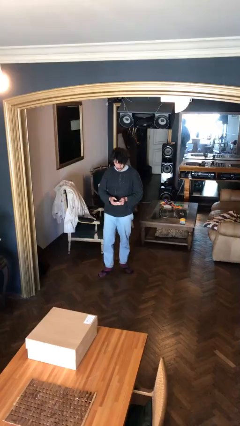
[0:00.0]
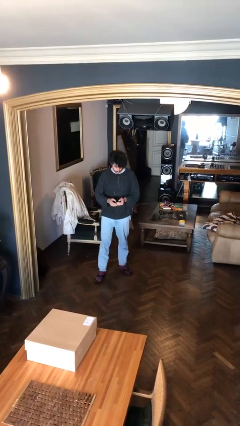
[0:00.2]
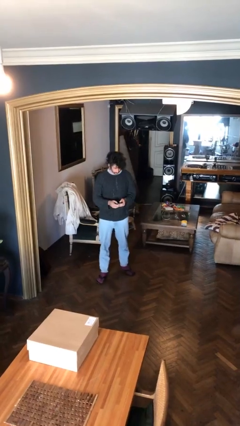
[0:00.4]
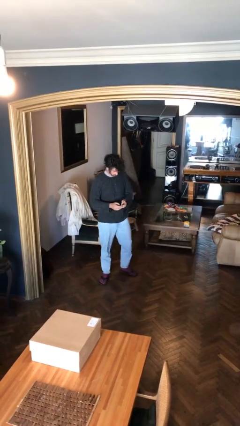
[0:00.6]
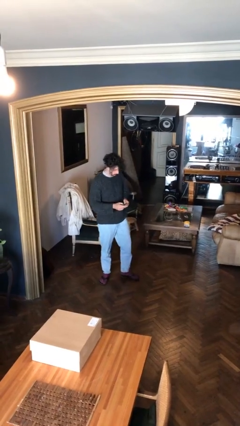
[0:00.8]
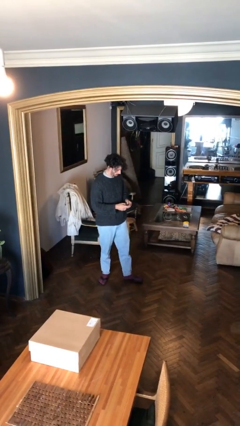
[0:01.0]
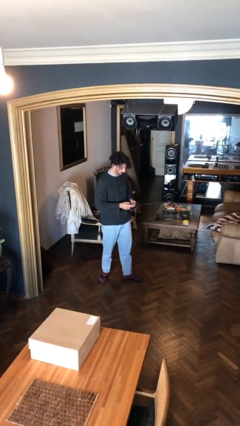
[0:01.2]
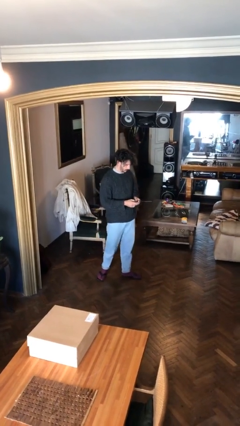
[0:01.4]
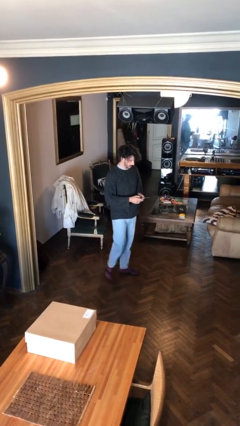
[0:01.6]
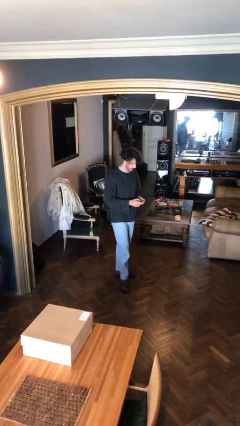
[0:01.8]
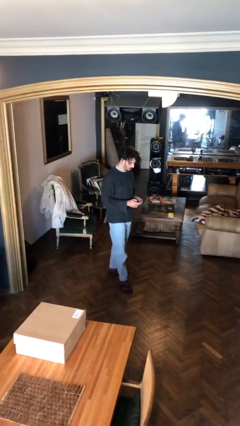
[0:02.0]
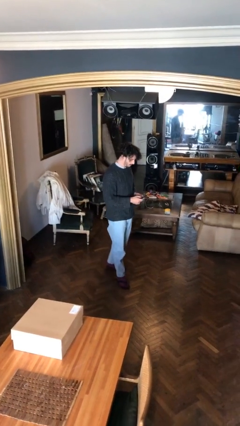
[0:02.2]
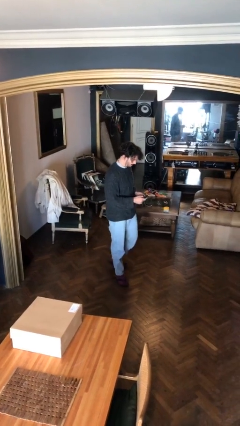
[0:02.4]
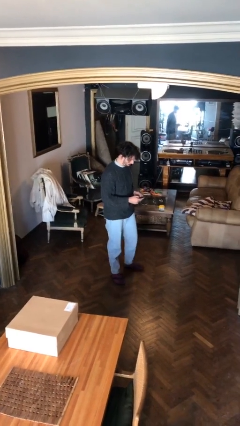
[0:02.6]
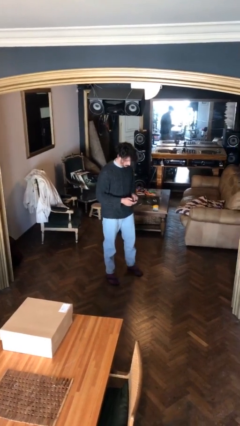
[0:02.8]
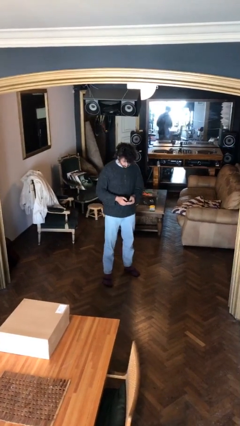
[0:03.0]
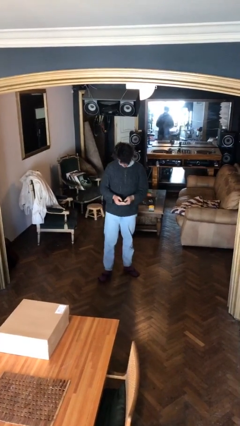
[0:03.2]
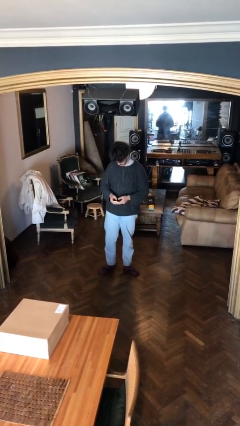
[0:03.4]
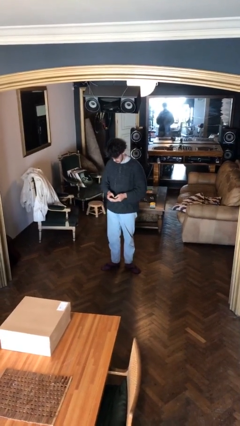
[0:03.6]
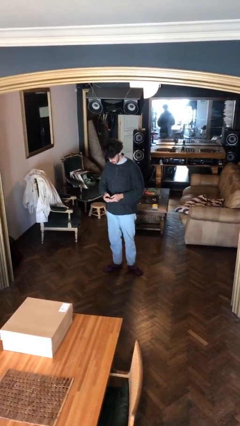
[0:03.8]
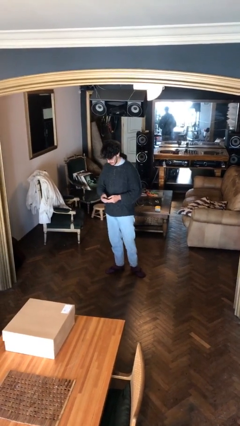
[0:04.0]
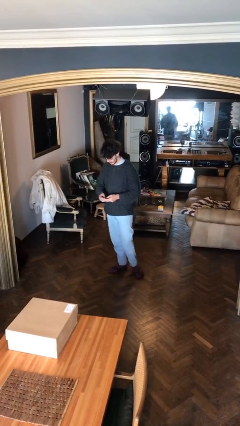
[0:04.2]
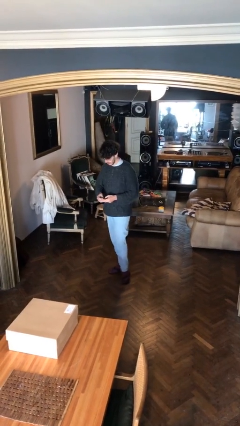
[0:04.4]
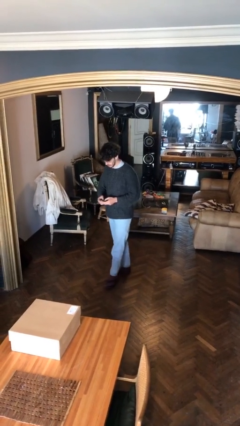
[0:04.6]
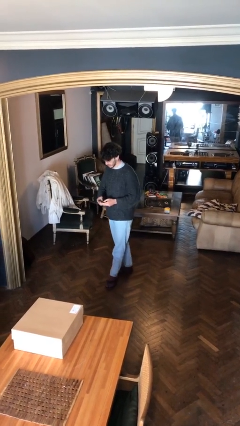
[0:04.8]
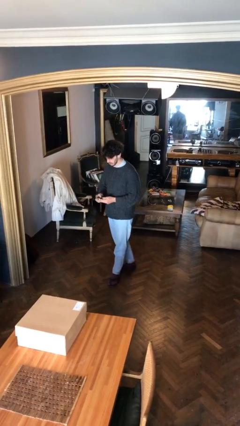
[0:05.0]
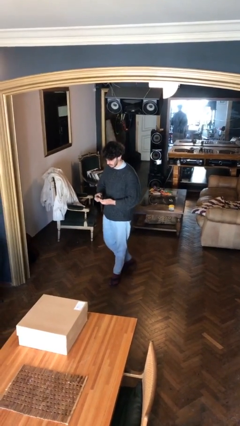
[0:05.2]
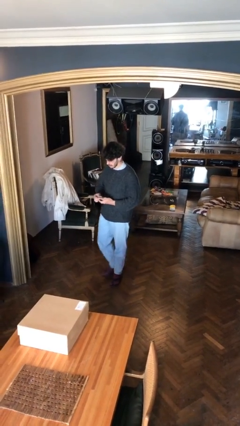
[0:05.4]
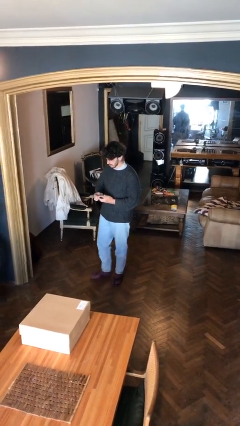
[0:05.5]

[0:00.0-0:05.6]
person texts on phone

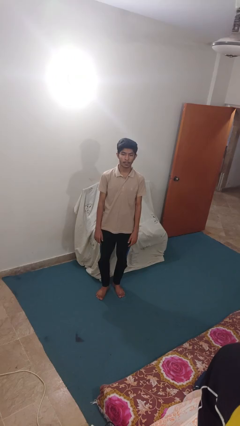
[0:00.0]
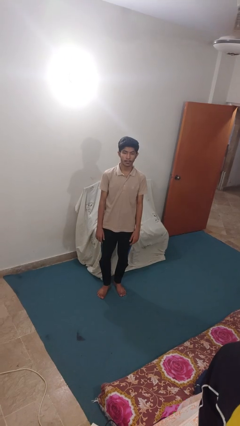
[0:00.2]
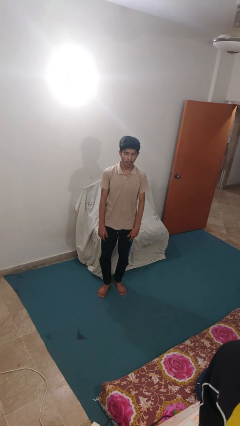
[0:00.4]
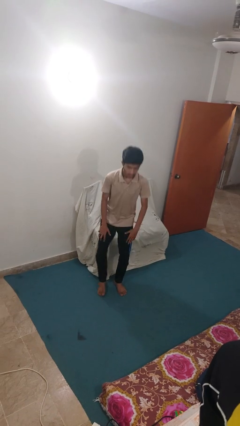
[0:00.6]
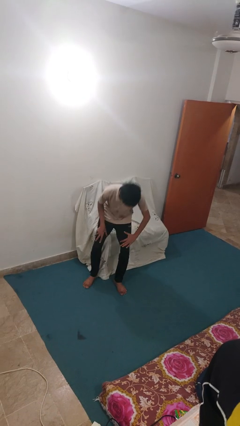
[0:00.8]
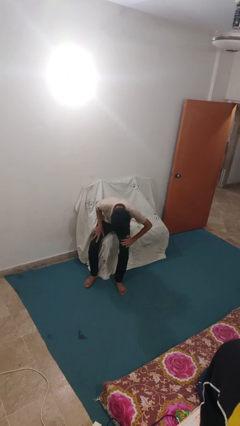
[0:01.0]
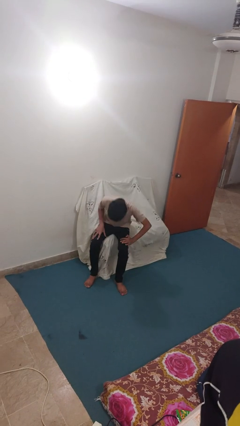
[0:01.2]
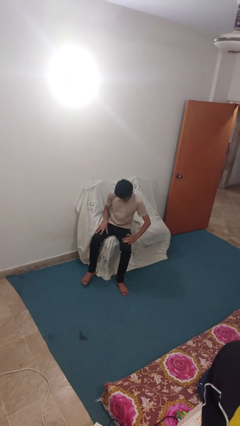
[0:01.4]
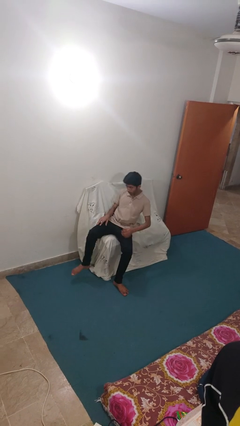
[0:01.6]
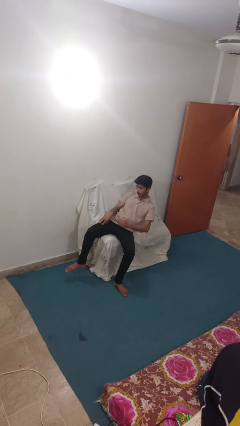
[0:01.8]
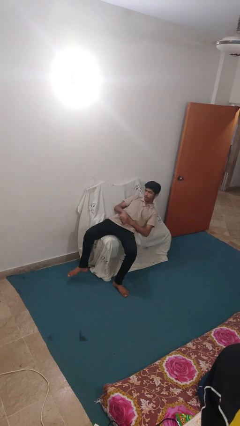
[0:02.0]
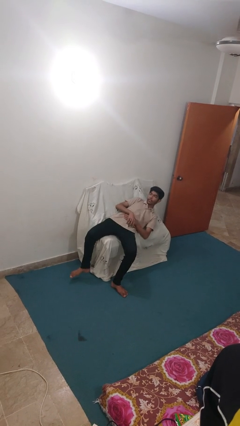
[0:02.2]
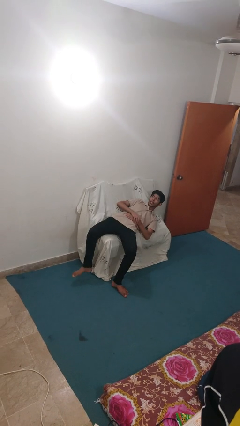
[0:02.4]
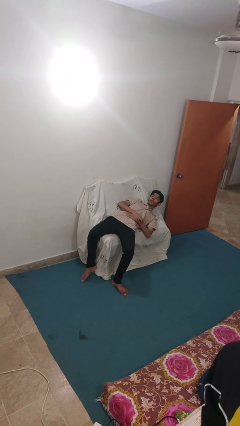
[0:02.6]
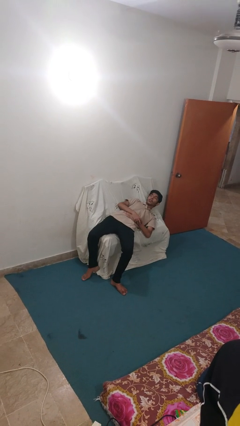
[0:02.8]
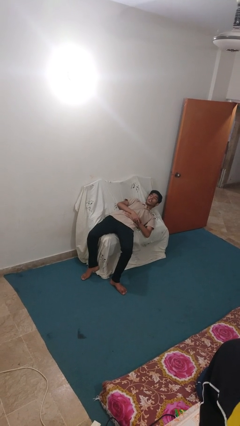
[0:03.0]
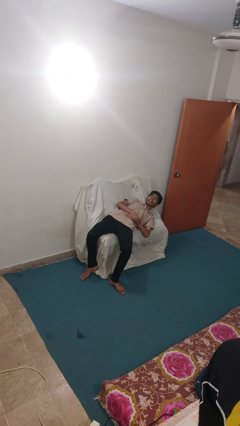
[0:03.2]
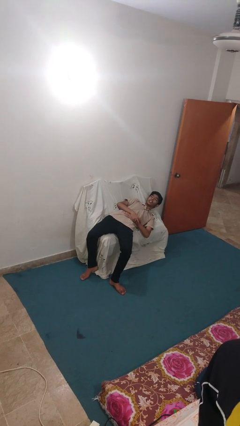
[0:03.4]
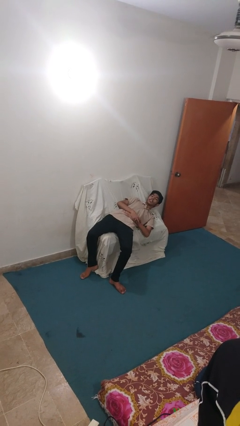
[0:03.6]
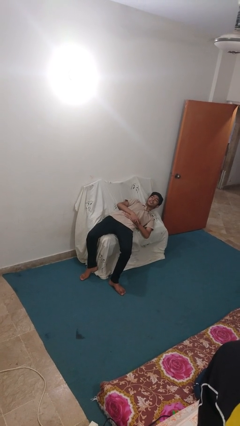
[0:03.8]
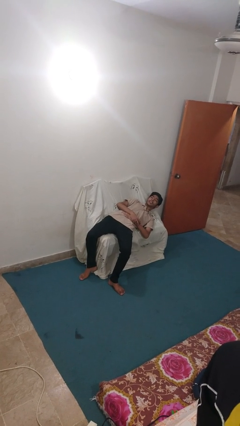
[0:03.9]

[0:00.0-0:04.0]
person lies down on couch

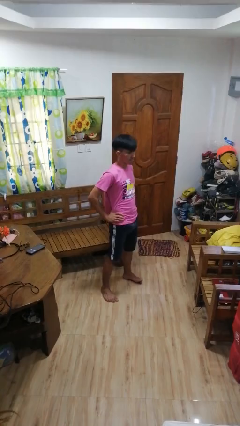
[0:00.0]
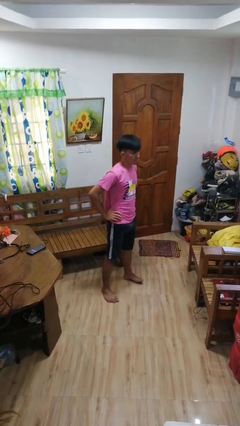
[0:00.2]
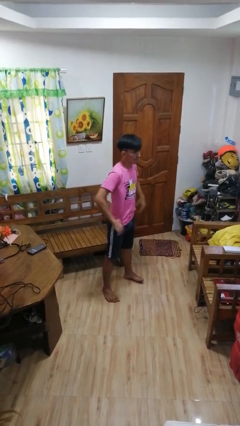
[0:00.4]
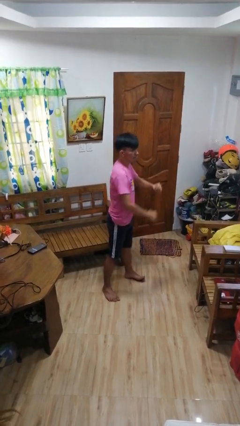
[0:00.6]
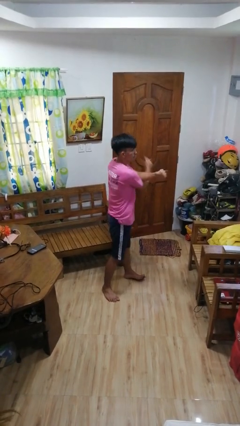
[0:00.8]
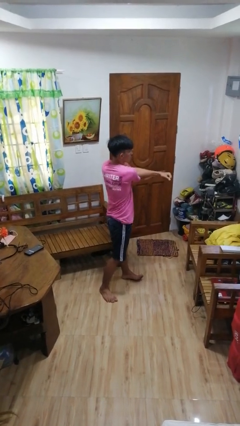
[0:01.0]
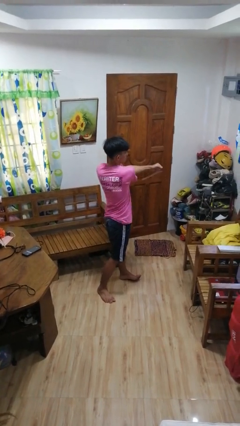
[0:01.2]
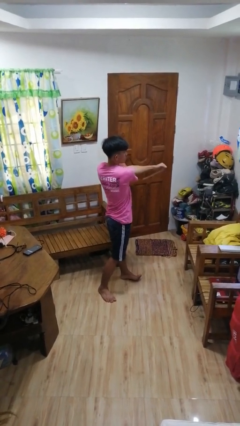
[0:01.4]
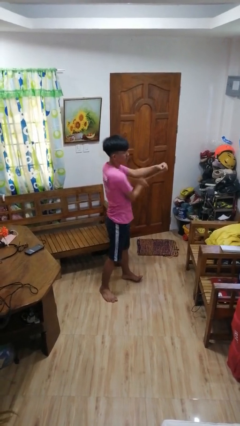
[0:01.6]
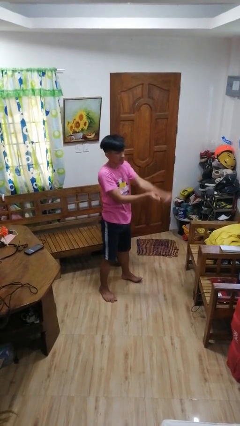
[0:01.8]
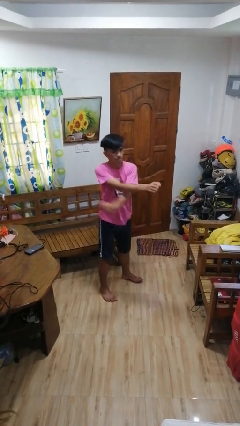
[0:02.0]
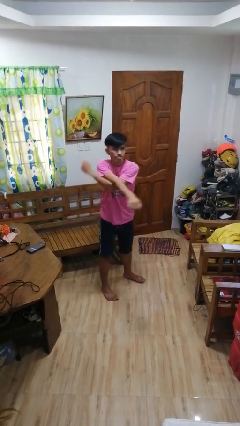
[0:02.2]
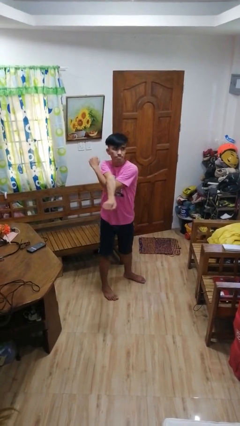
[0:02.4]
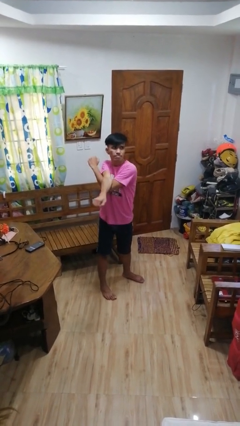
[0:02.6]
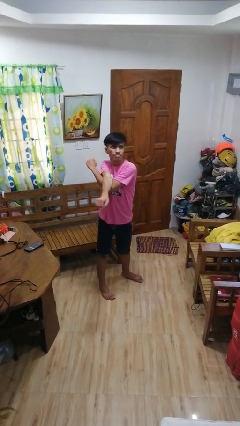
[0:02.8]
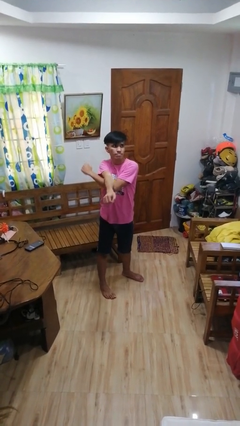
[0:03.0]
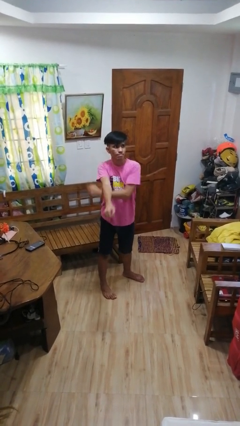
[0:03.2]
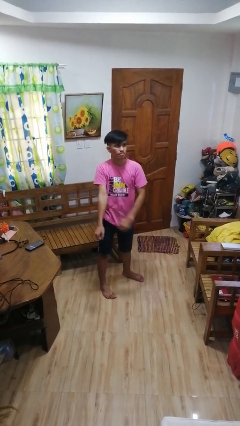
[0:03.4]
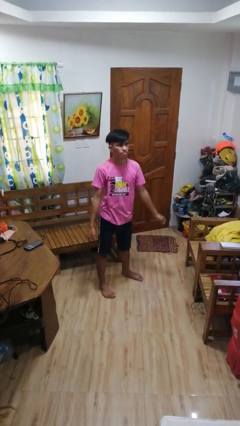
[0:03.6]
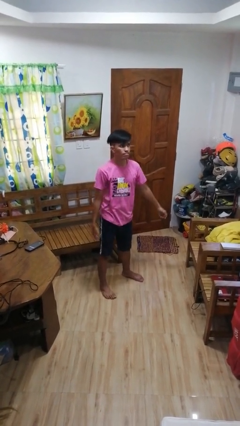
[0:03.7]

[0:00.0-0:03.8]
person stretches arms to side

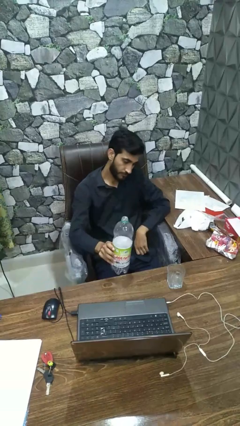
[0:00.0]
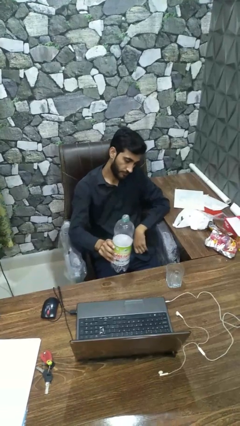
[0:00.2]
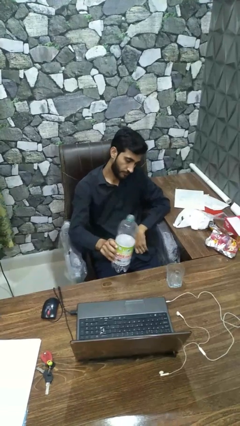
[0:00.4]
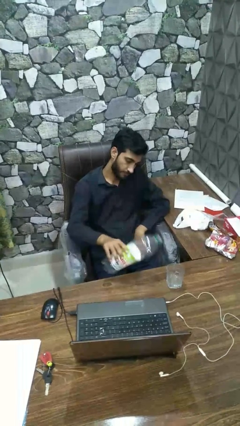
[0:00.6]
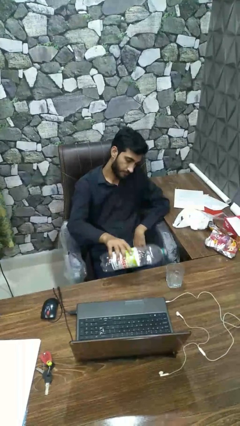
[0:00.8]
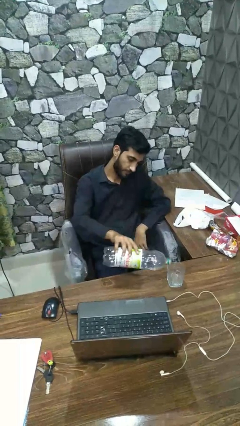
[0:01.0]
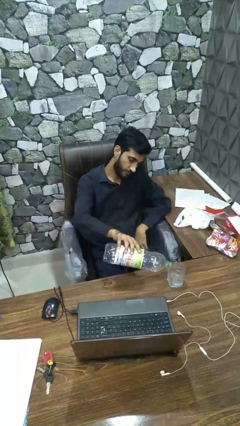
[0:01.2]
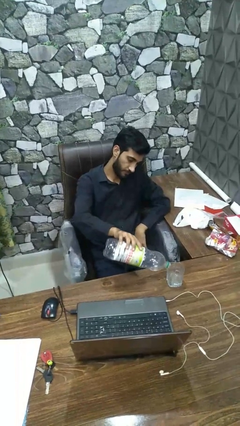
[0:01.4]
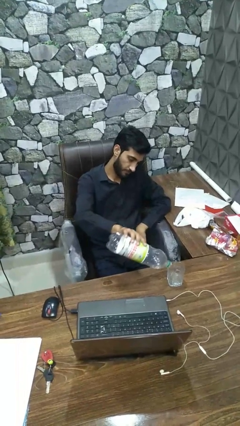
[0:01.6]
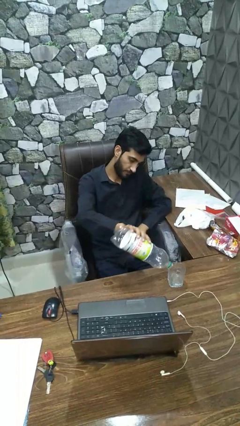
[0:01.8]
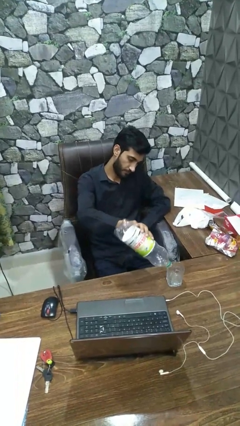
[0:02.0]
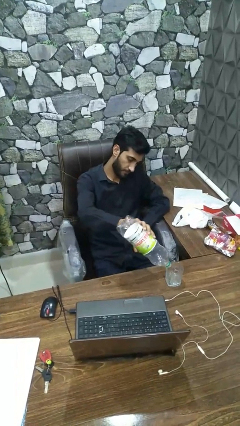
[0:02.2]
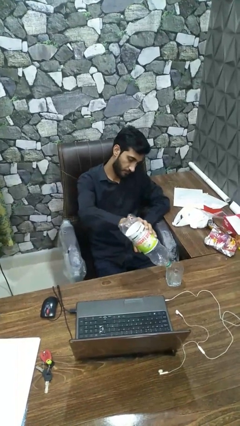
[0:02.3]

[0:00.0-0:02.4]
person pours liquid into cup

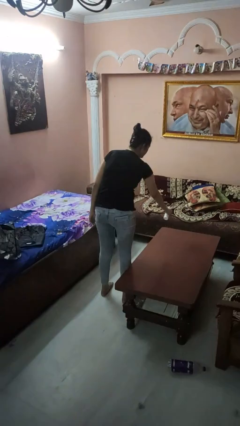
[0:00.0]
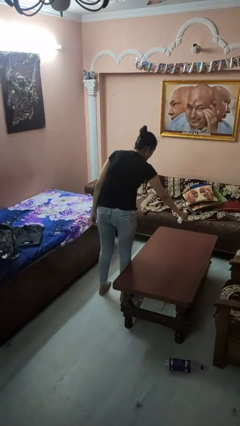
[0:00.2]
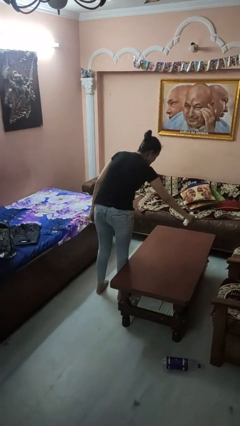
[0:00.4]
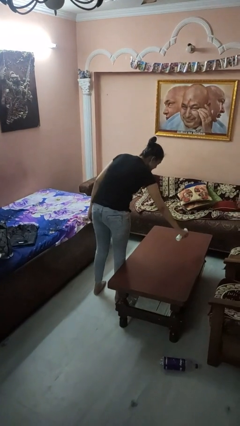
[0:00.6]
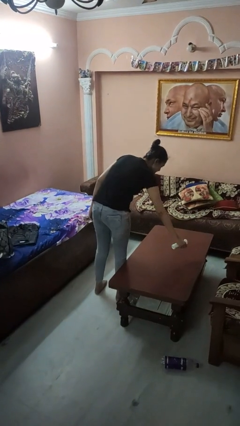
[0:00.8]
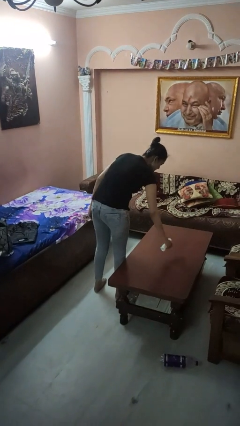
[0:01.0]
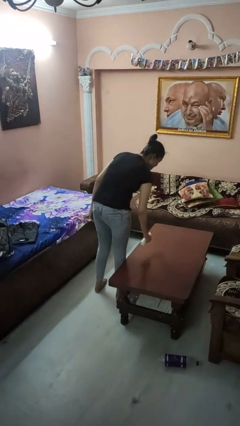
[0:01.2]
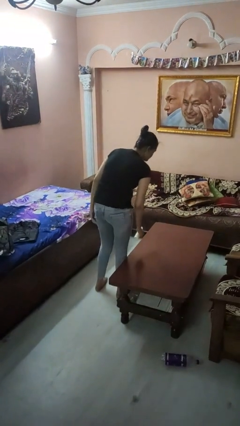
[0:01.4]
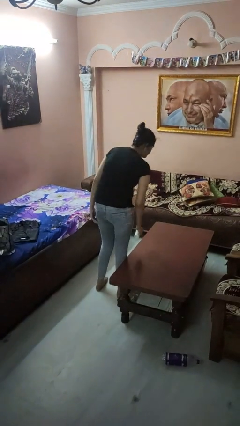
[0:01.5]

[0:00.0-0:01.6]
person sprays from bottle

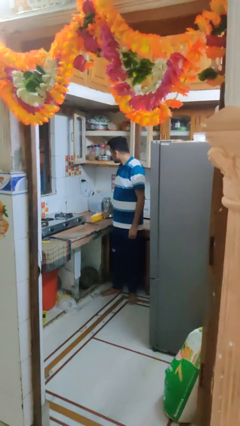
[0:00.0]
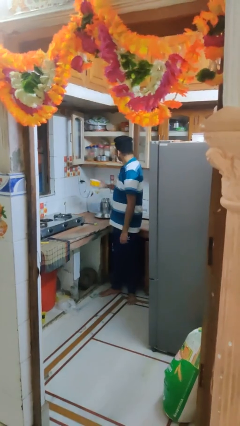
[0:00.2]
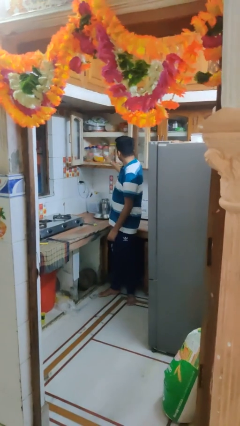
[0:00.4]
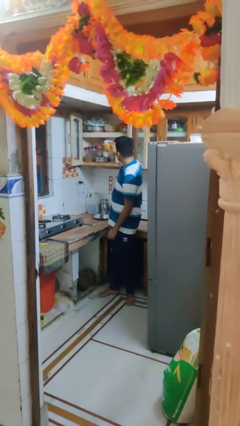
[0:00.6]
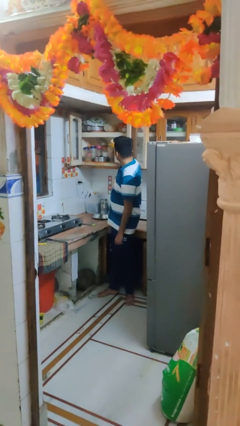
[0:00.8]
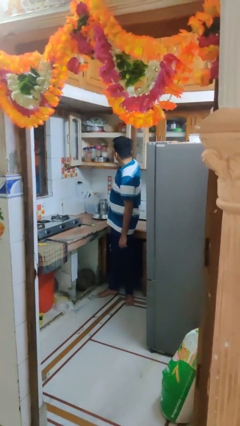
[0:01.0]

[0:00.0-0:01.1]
person puts object in cabinet
